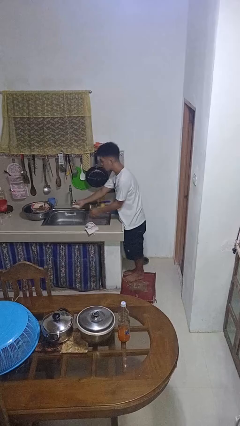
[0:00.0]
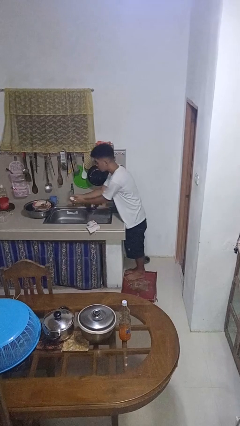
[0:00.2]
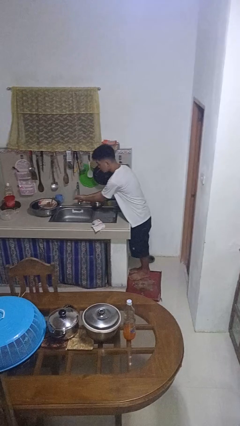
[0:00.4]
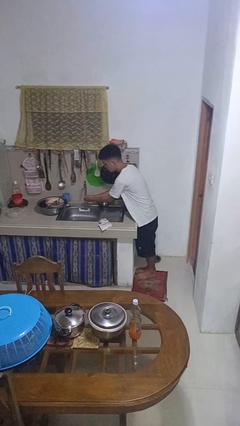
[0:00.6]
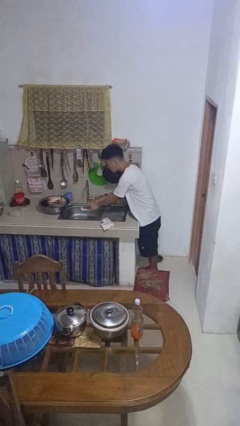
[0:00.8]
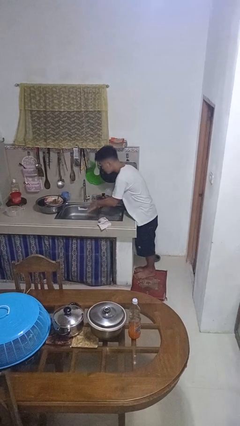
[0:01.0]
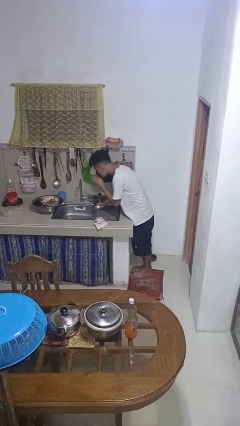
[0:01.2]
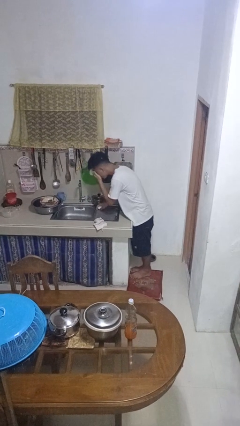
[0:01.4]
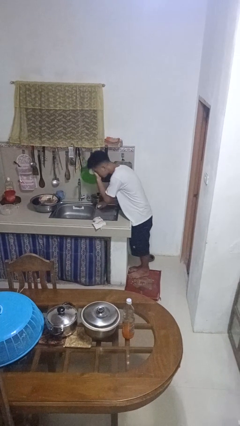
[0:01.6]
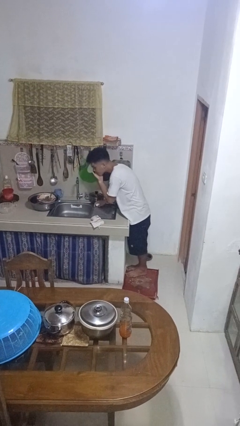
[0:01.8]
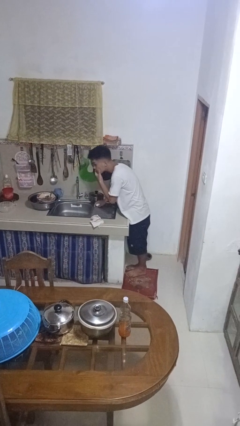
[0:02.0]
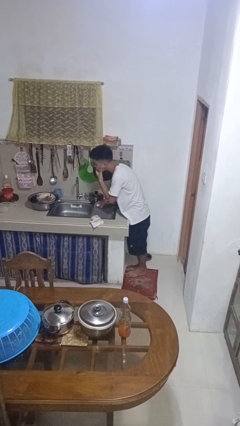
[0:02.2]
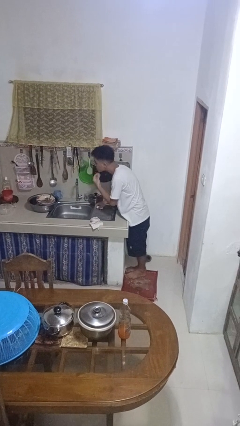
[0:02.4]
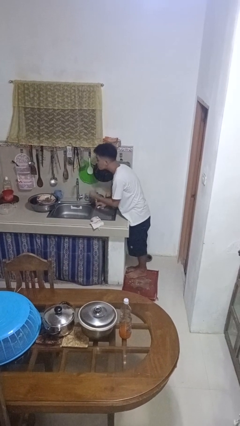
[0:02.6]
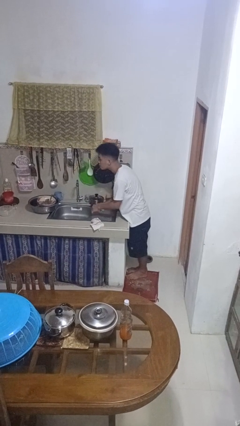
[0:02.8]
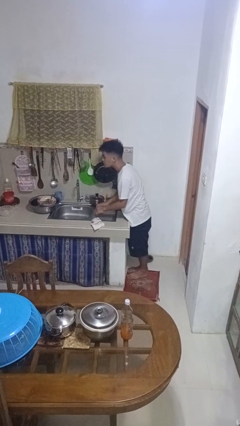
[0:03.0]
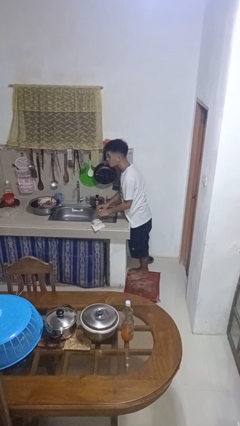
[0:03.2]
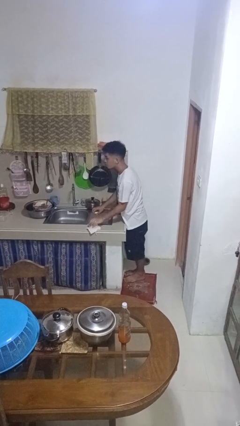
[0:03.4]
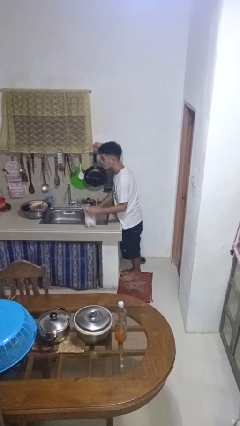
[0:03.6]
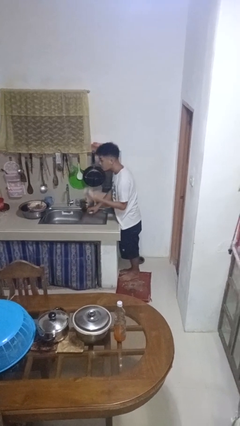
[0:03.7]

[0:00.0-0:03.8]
person washes face

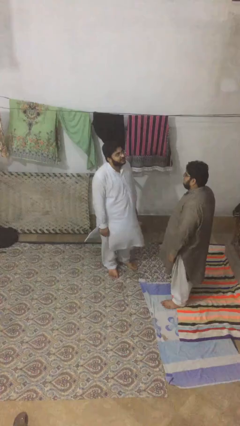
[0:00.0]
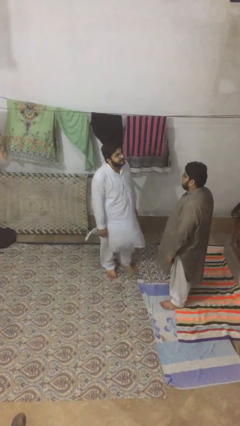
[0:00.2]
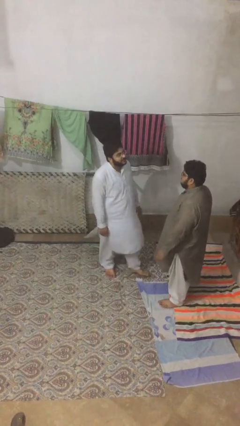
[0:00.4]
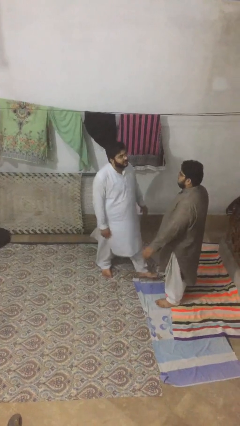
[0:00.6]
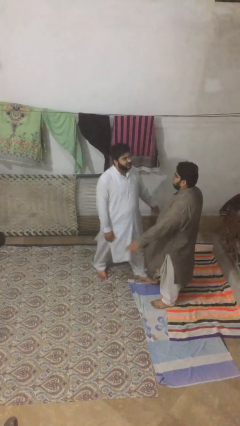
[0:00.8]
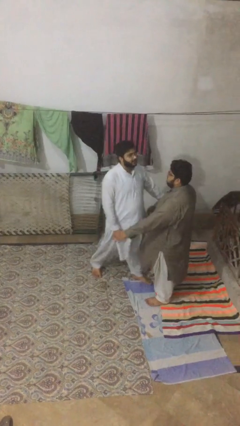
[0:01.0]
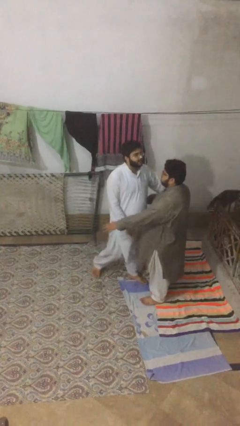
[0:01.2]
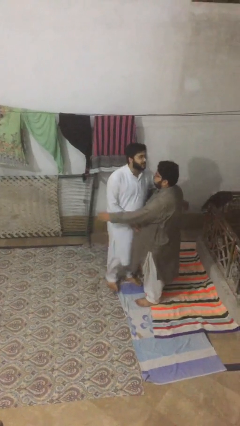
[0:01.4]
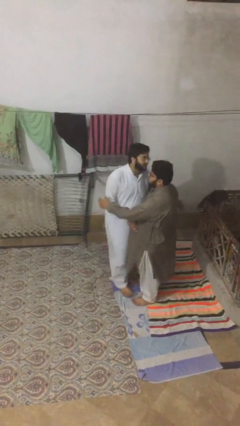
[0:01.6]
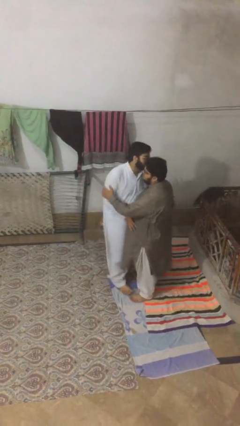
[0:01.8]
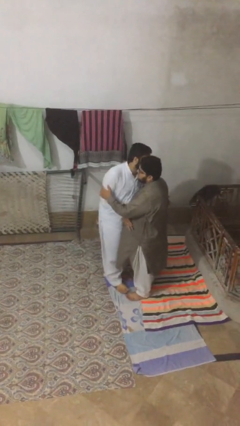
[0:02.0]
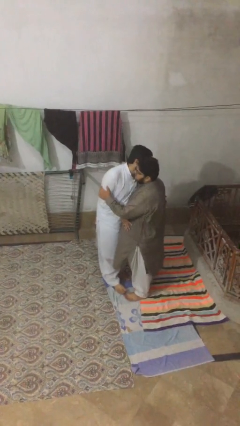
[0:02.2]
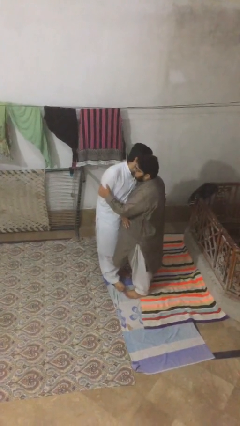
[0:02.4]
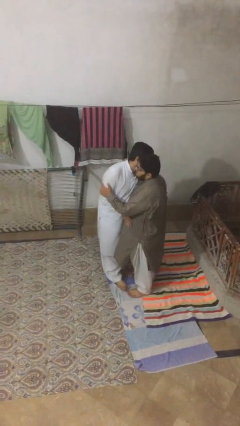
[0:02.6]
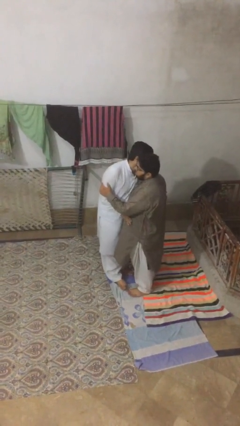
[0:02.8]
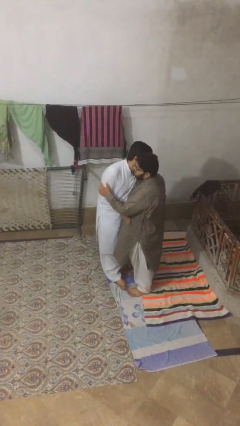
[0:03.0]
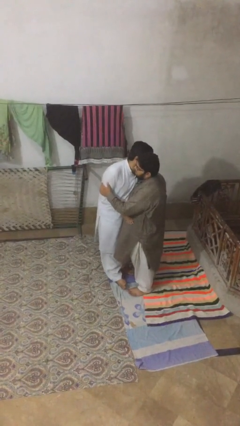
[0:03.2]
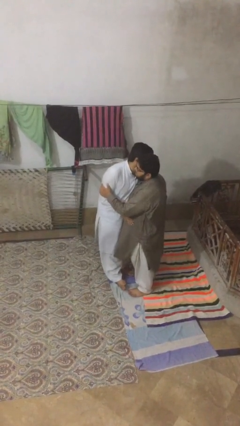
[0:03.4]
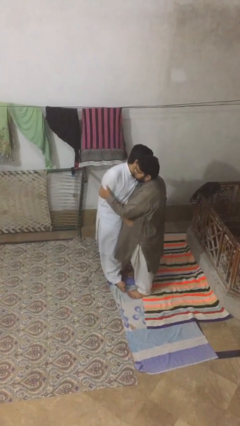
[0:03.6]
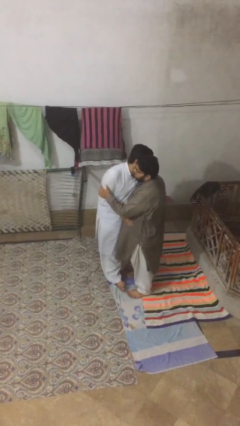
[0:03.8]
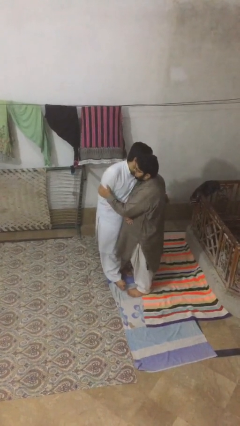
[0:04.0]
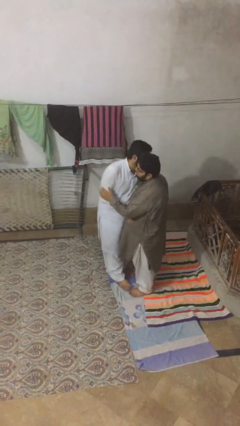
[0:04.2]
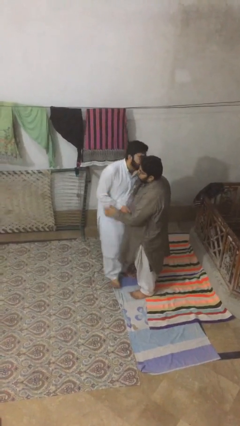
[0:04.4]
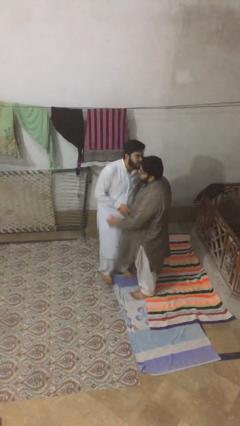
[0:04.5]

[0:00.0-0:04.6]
person embraces person

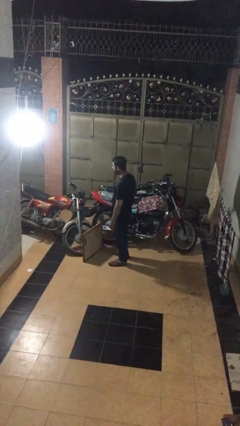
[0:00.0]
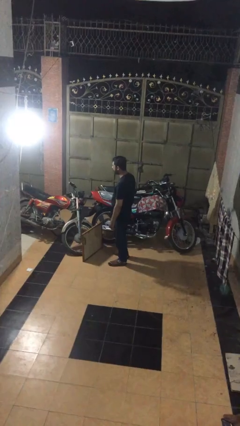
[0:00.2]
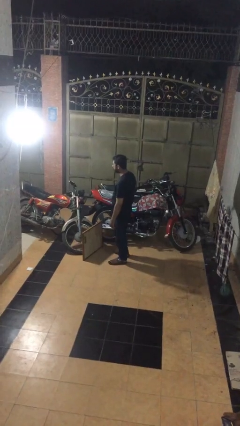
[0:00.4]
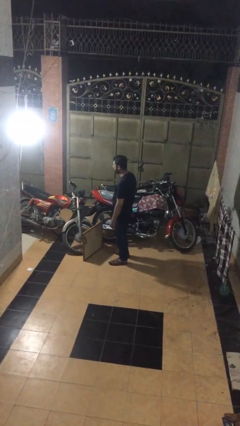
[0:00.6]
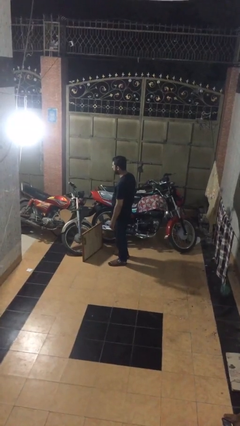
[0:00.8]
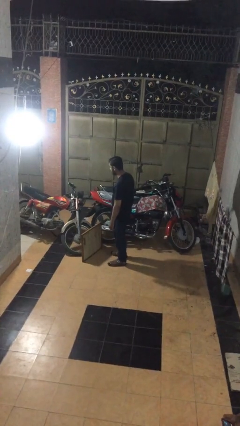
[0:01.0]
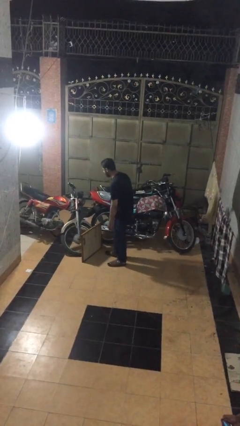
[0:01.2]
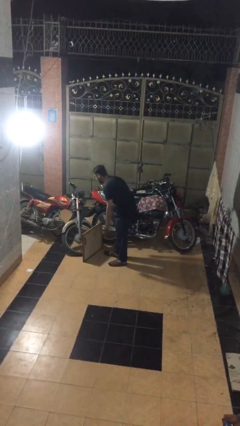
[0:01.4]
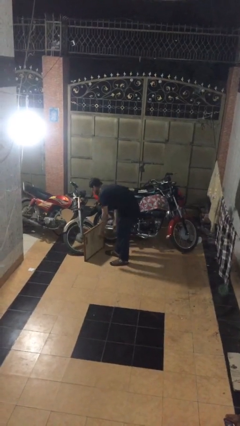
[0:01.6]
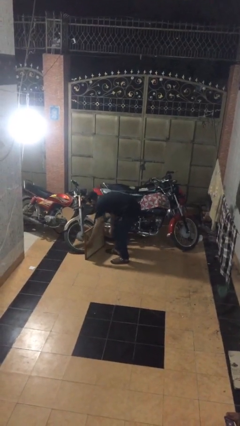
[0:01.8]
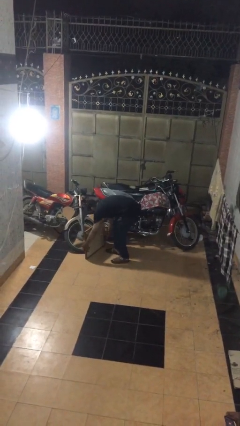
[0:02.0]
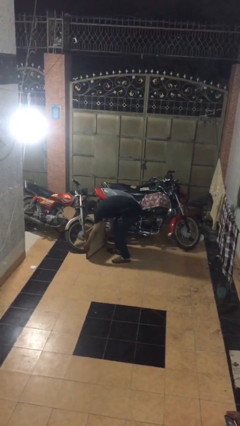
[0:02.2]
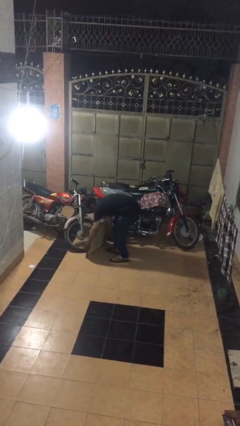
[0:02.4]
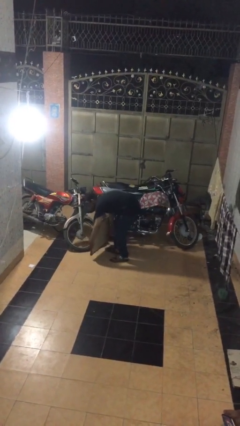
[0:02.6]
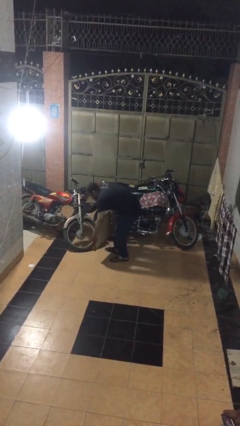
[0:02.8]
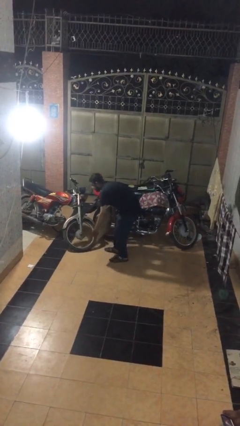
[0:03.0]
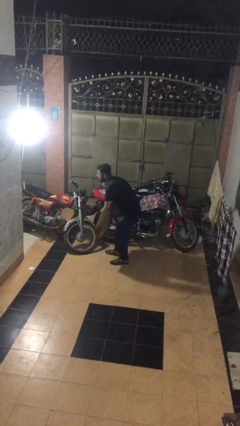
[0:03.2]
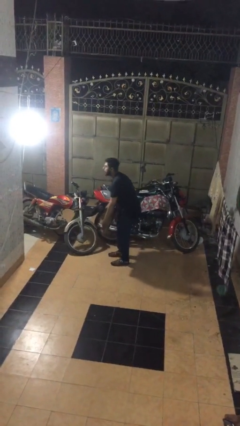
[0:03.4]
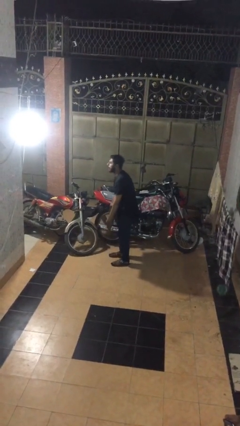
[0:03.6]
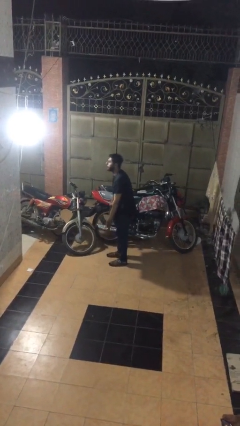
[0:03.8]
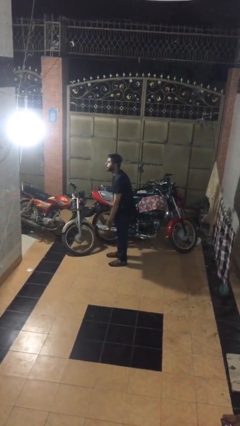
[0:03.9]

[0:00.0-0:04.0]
person picks up object from floor

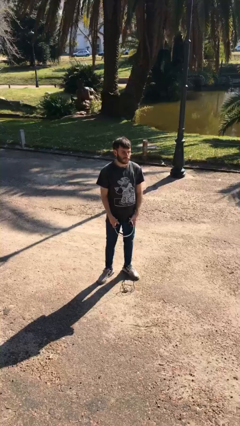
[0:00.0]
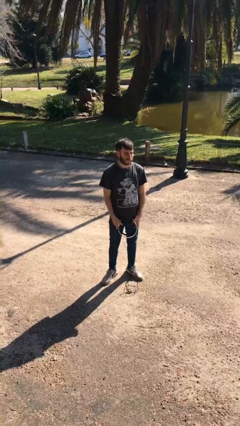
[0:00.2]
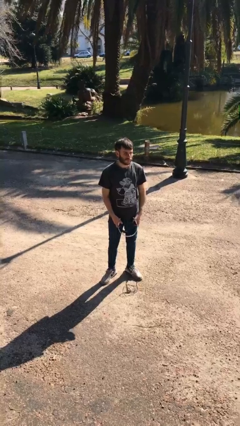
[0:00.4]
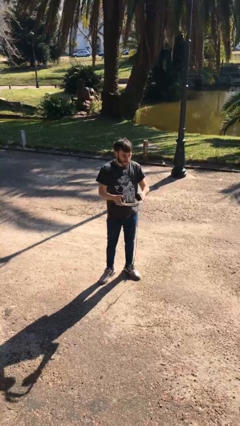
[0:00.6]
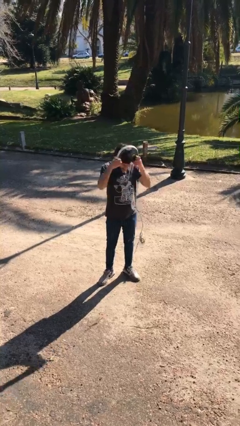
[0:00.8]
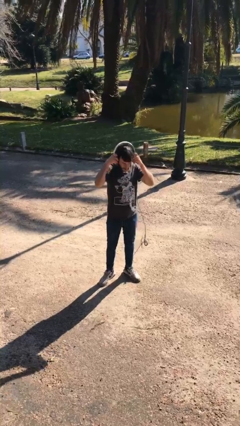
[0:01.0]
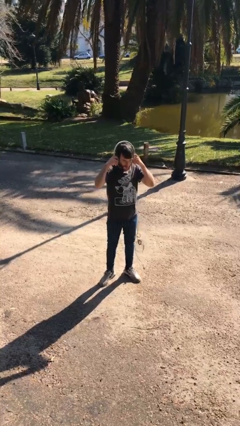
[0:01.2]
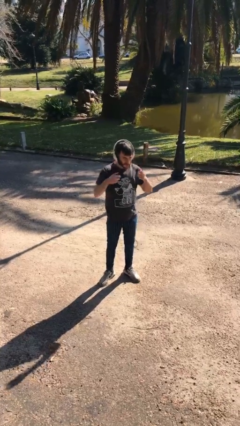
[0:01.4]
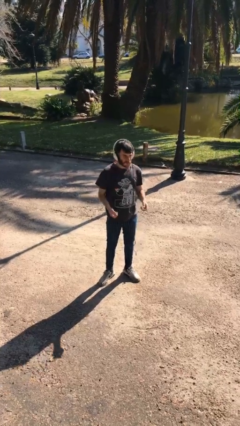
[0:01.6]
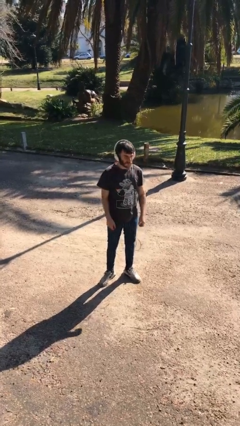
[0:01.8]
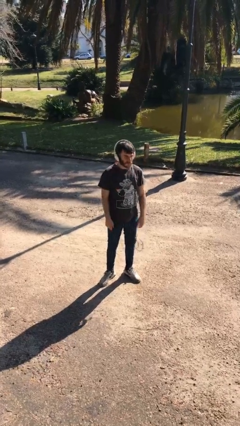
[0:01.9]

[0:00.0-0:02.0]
person puts on headphones

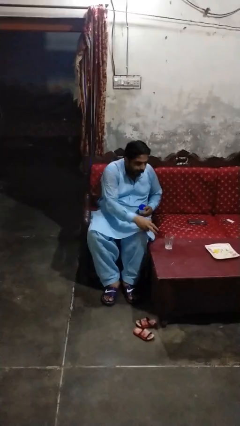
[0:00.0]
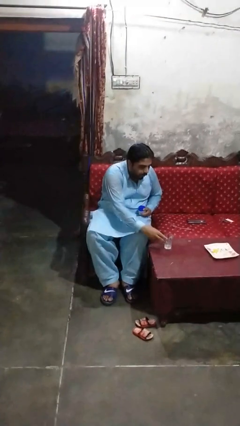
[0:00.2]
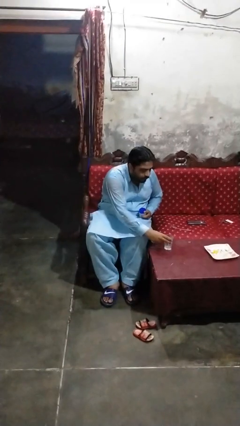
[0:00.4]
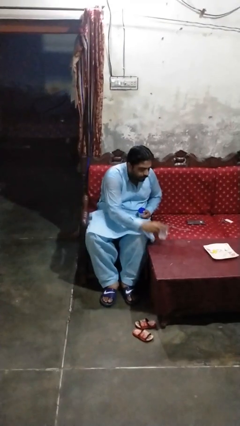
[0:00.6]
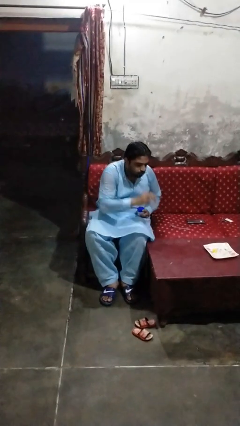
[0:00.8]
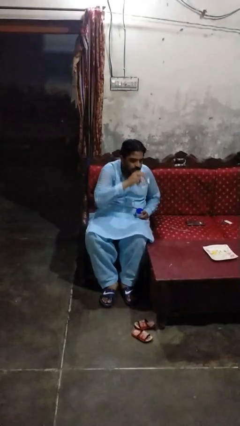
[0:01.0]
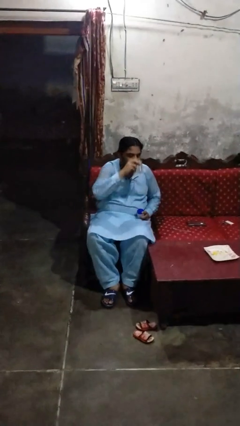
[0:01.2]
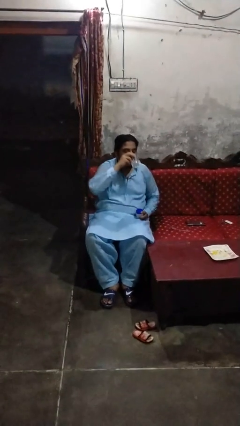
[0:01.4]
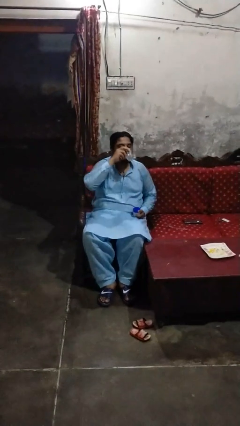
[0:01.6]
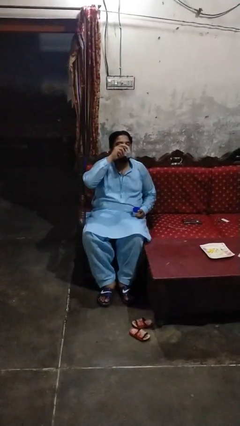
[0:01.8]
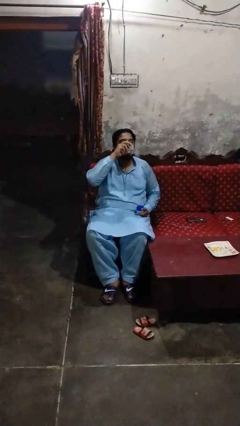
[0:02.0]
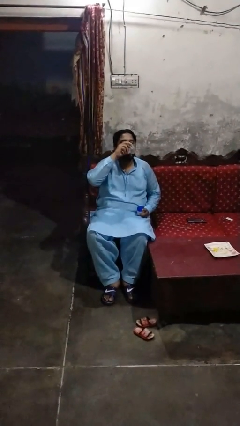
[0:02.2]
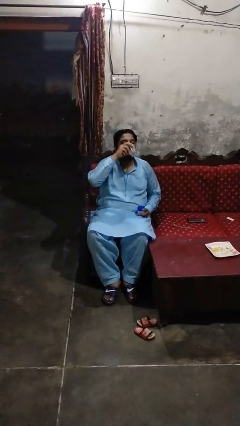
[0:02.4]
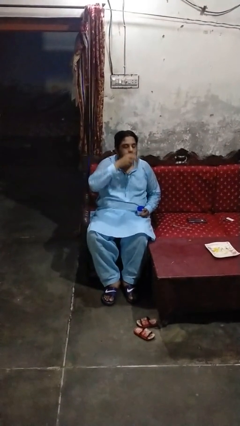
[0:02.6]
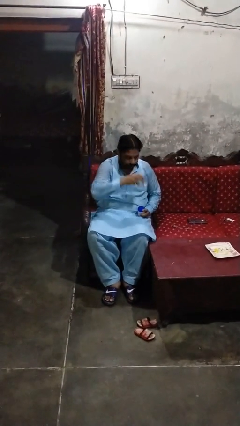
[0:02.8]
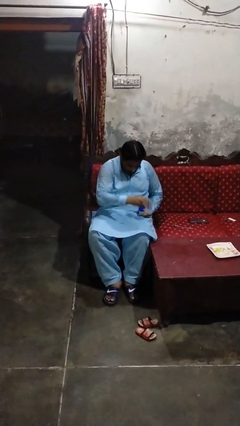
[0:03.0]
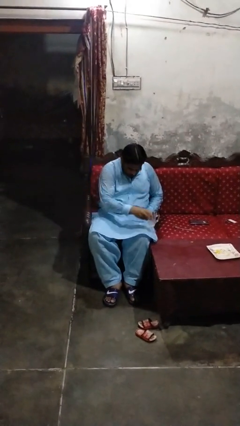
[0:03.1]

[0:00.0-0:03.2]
person drinks from cup
